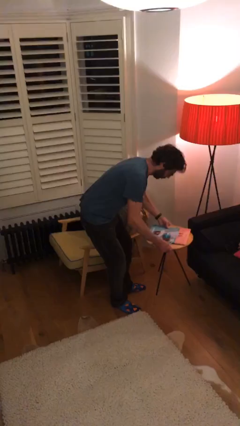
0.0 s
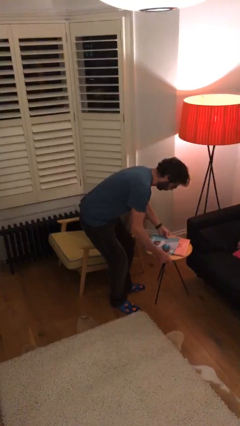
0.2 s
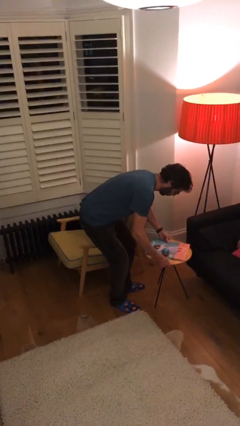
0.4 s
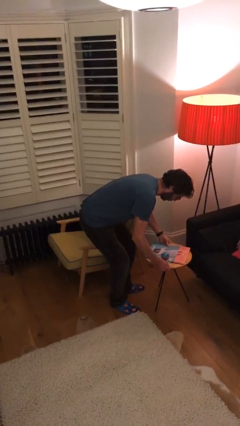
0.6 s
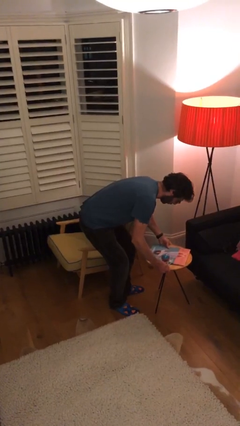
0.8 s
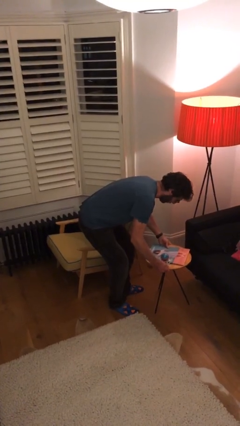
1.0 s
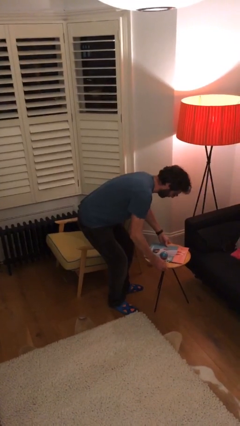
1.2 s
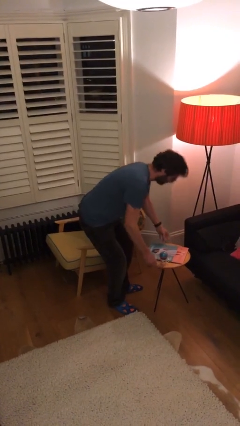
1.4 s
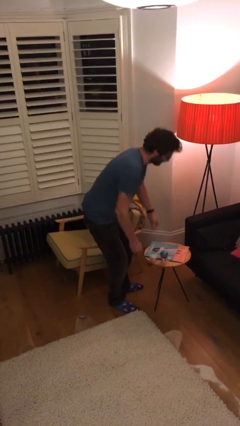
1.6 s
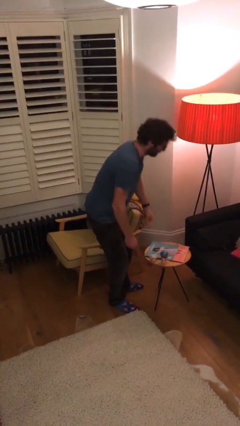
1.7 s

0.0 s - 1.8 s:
person puts down object on floor

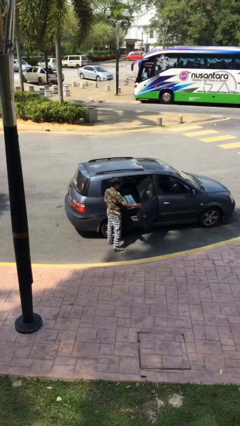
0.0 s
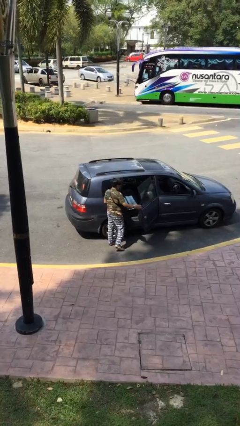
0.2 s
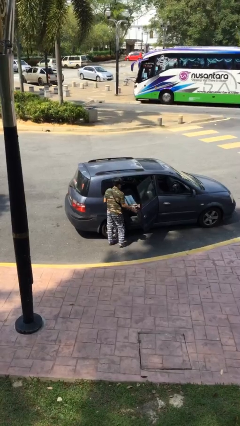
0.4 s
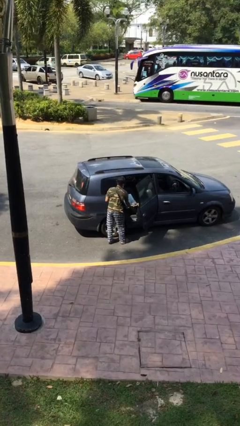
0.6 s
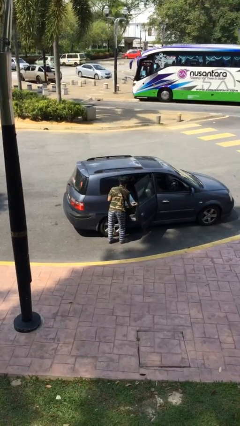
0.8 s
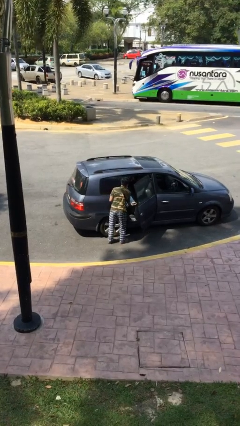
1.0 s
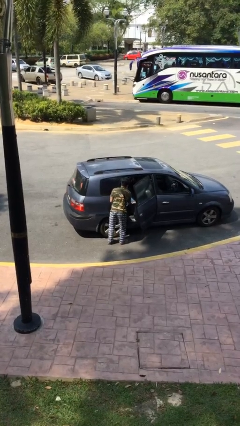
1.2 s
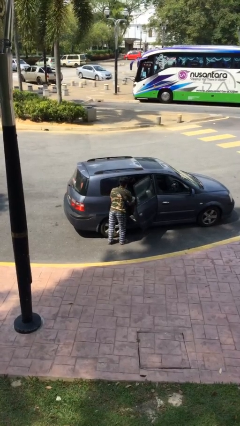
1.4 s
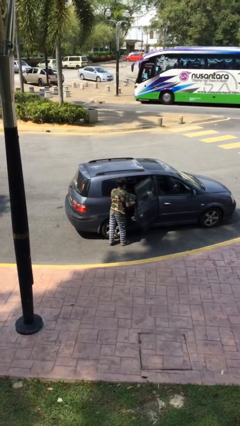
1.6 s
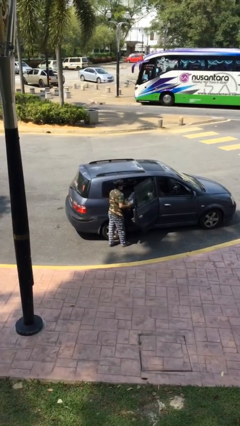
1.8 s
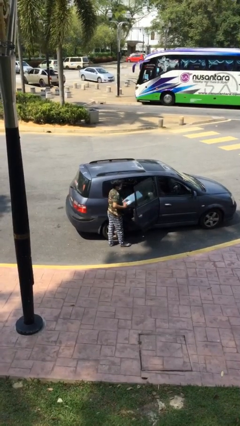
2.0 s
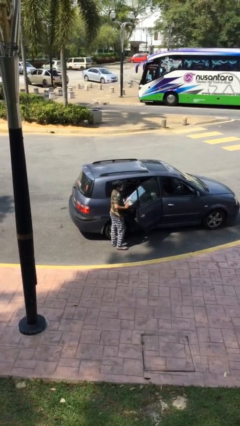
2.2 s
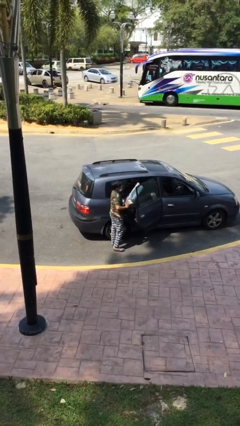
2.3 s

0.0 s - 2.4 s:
person unloads car

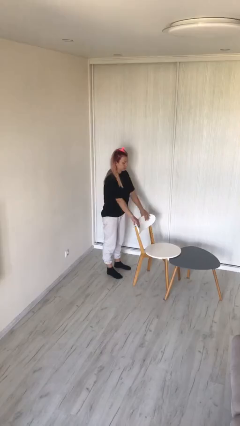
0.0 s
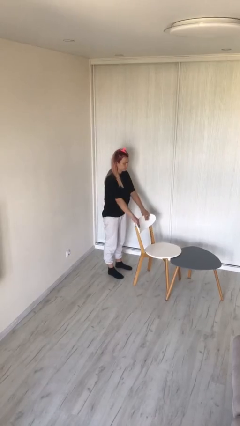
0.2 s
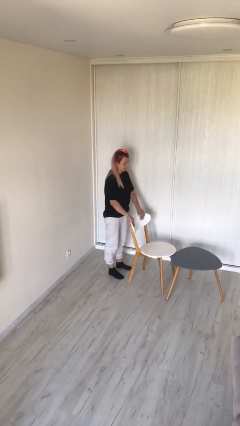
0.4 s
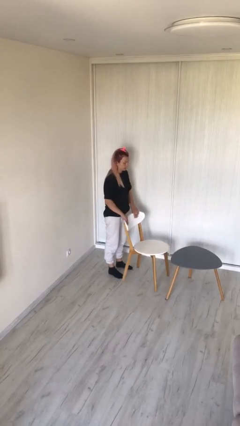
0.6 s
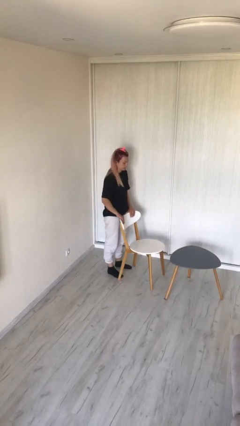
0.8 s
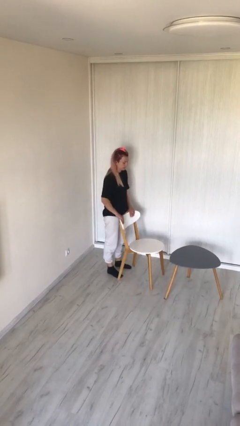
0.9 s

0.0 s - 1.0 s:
person pulls out chair

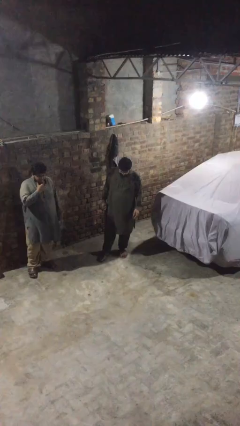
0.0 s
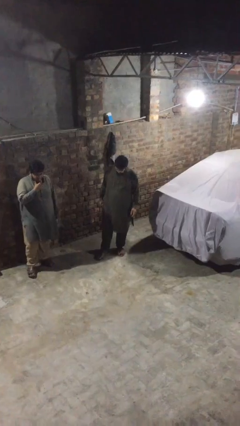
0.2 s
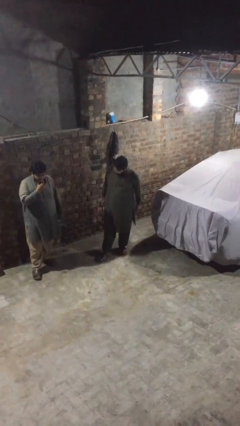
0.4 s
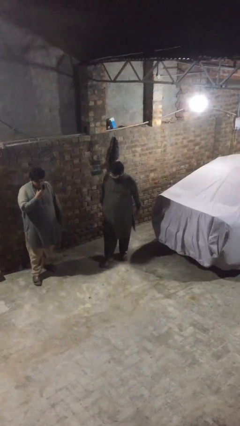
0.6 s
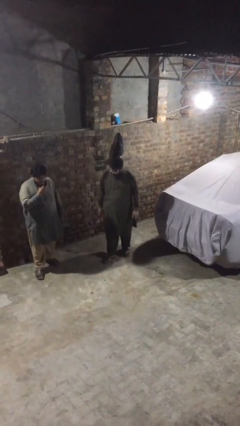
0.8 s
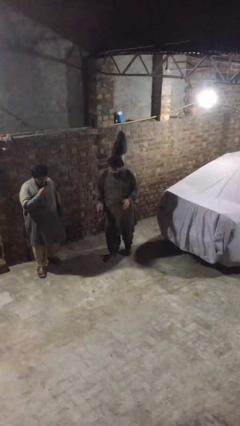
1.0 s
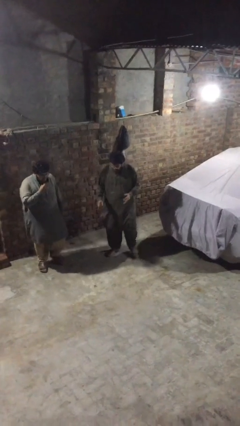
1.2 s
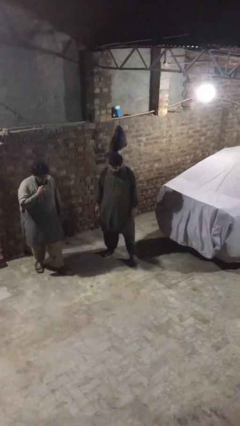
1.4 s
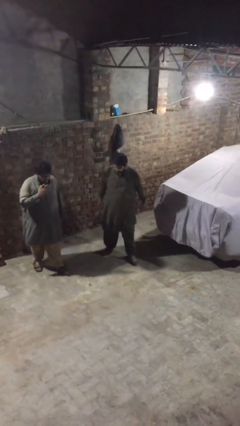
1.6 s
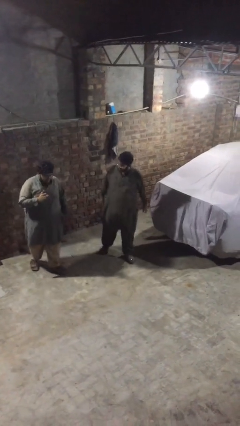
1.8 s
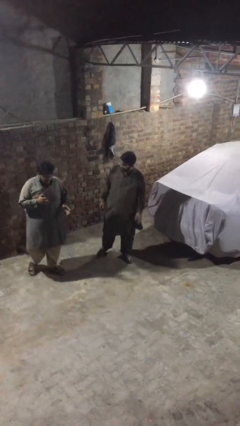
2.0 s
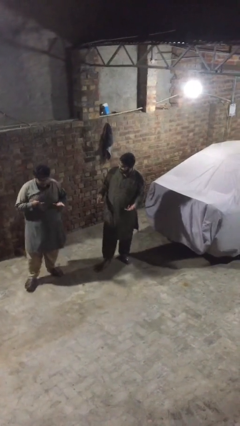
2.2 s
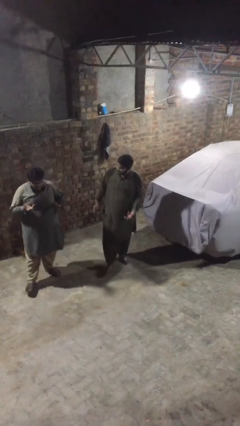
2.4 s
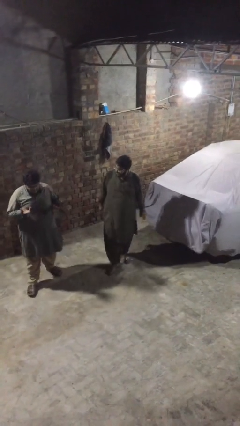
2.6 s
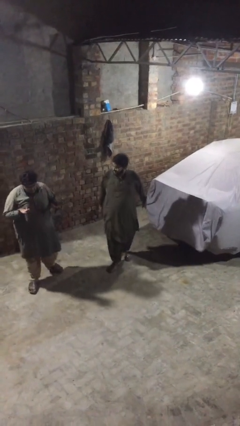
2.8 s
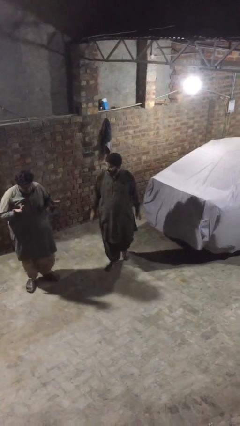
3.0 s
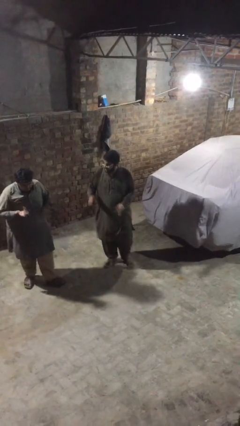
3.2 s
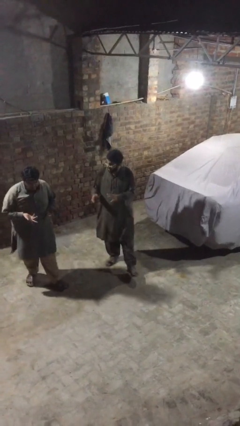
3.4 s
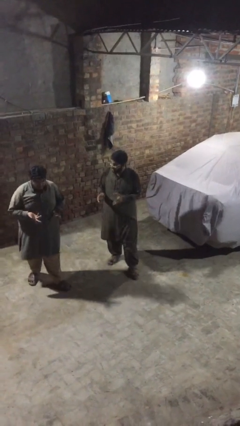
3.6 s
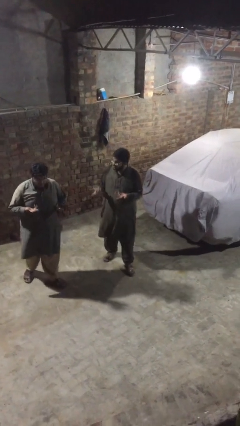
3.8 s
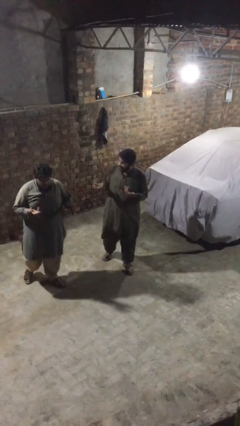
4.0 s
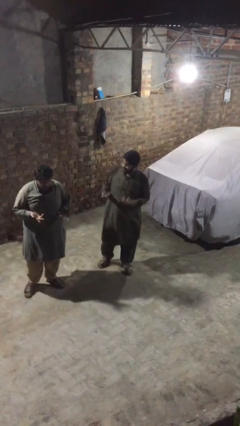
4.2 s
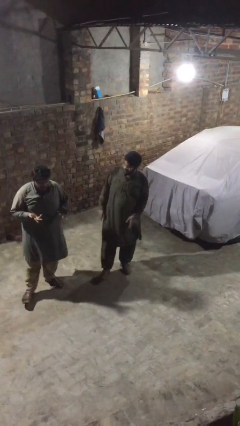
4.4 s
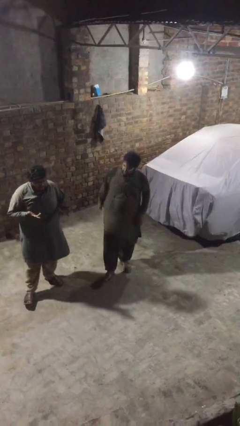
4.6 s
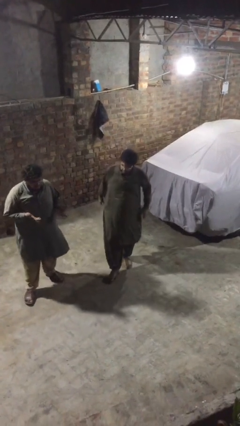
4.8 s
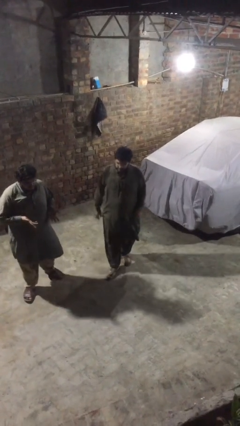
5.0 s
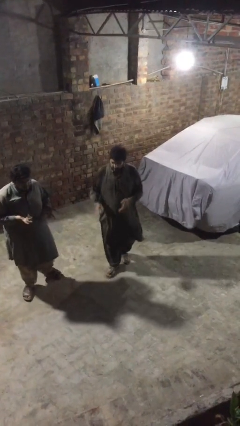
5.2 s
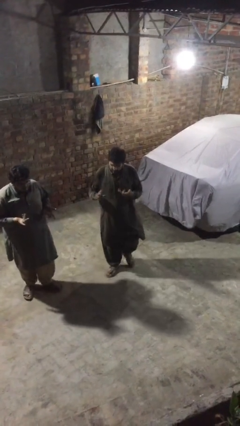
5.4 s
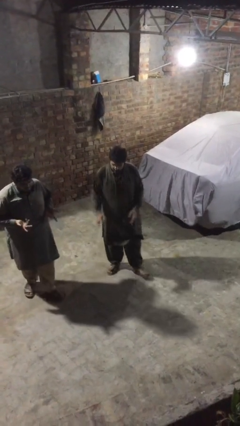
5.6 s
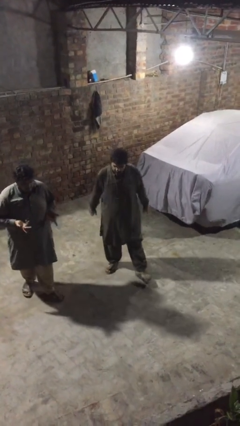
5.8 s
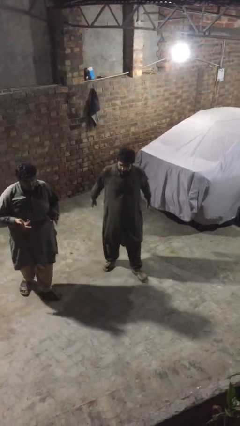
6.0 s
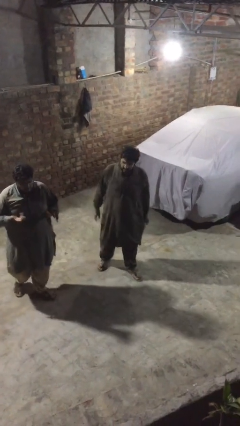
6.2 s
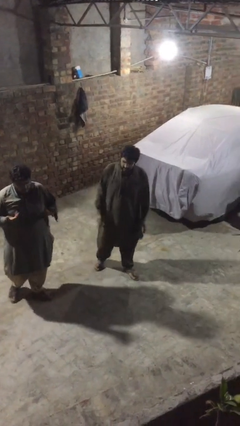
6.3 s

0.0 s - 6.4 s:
person talks to person

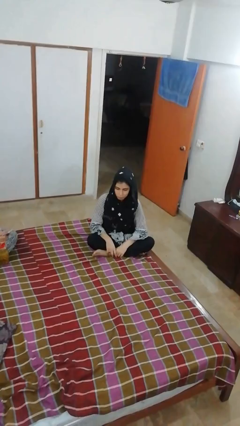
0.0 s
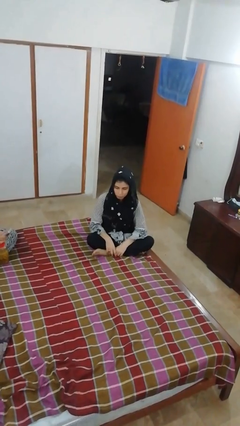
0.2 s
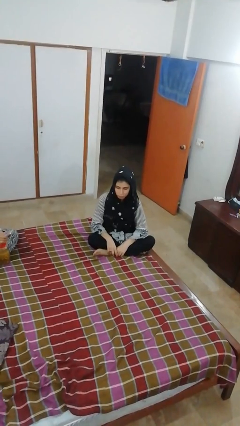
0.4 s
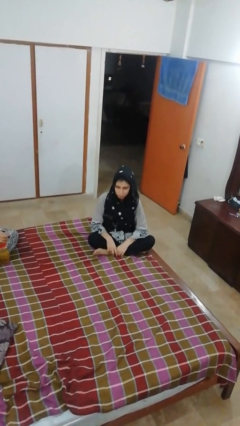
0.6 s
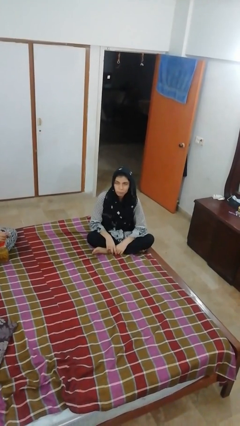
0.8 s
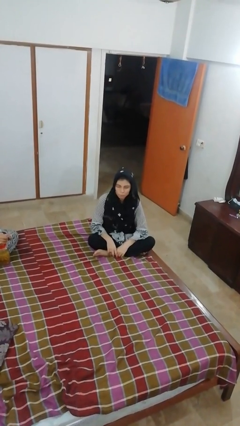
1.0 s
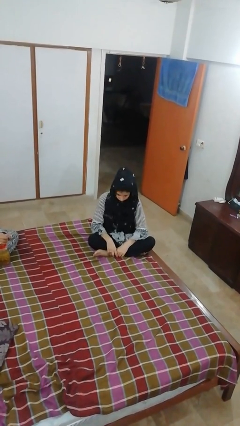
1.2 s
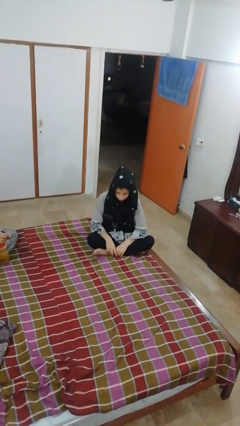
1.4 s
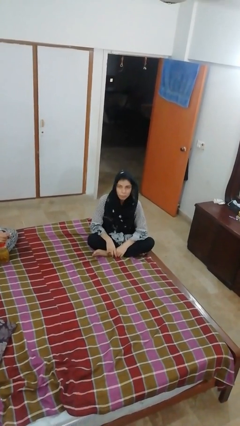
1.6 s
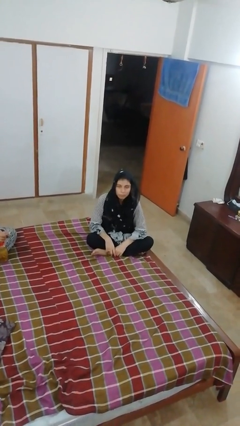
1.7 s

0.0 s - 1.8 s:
person nods head

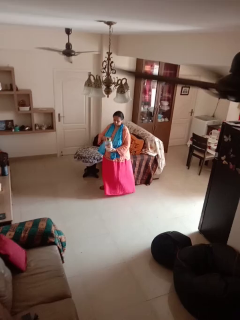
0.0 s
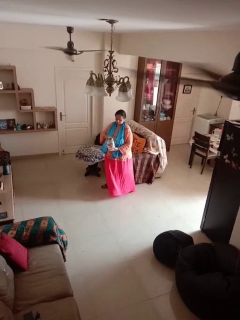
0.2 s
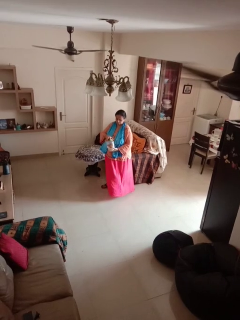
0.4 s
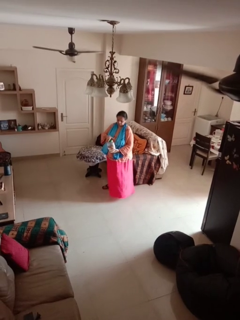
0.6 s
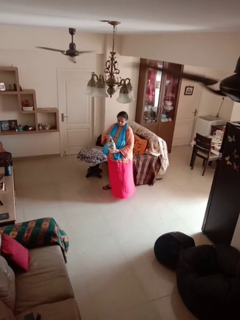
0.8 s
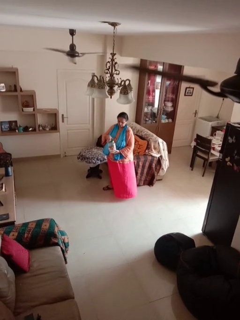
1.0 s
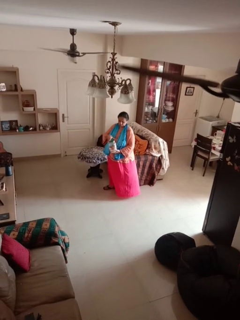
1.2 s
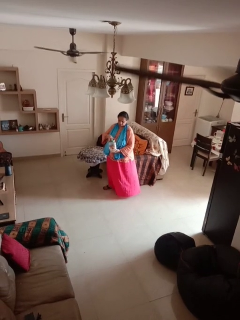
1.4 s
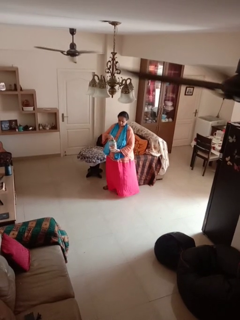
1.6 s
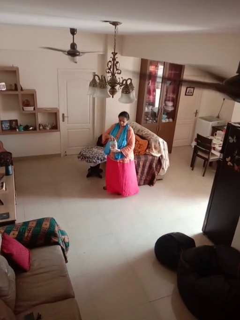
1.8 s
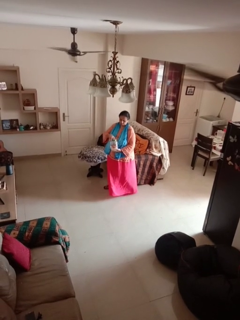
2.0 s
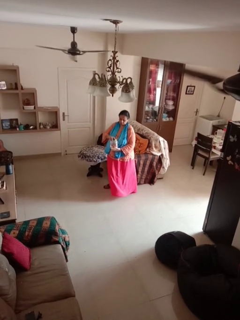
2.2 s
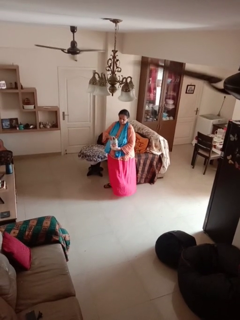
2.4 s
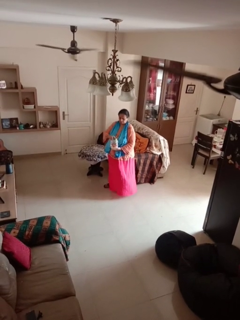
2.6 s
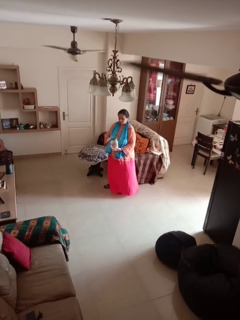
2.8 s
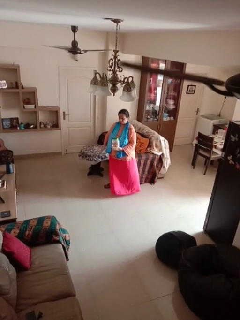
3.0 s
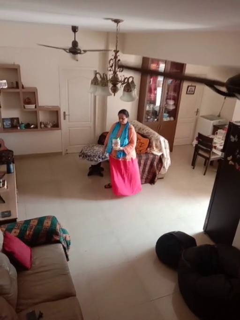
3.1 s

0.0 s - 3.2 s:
person closes jar

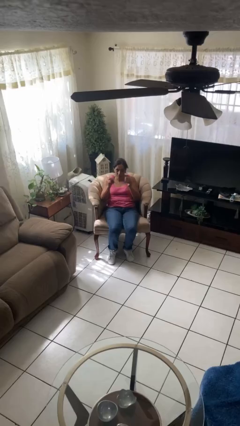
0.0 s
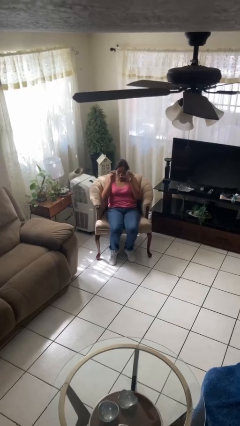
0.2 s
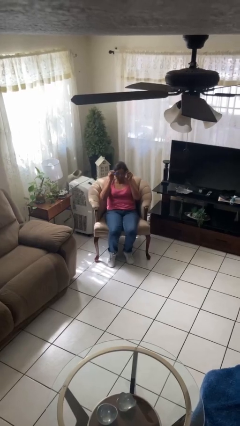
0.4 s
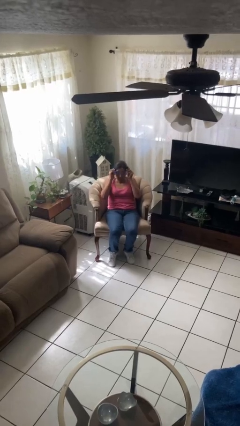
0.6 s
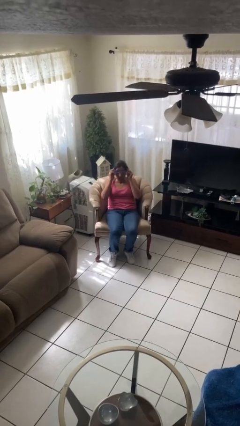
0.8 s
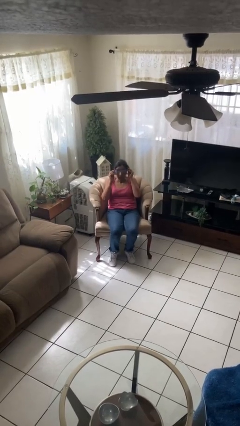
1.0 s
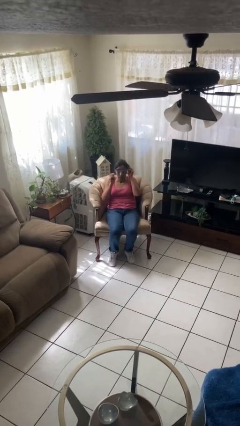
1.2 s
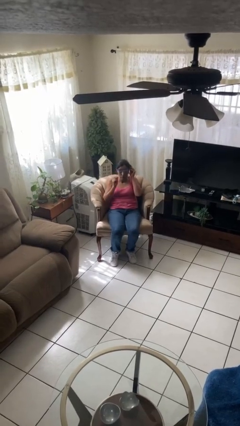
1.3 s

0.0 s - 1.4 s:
person puts on glasses
